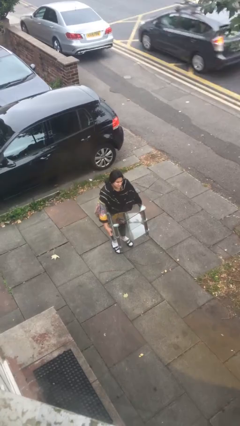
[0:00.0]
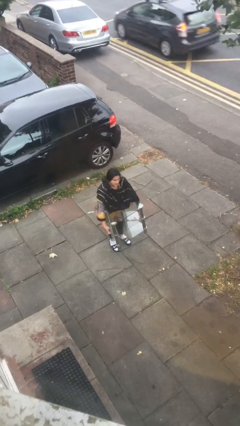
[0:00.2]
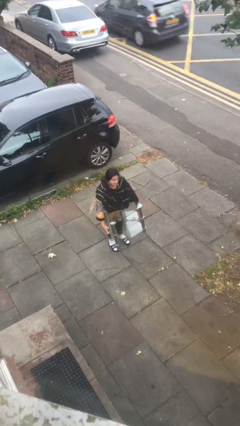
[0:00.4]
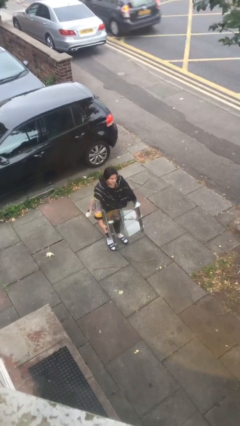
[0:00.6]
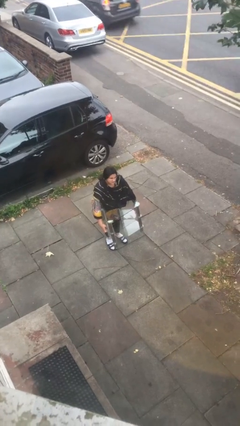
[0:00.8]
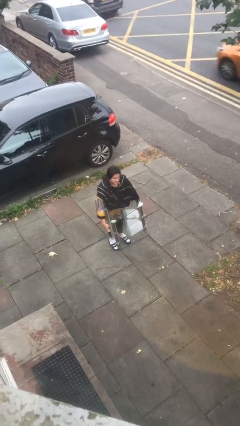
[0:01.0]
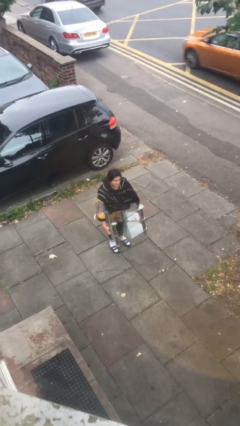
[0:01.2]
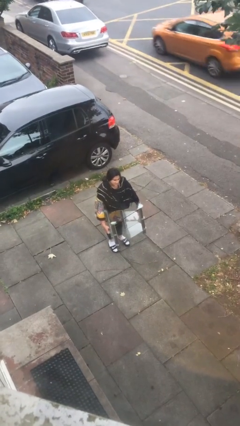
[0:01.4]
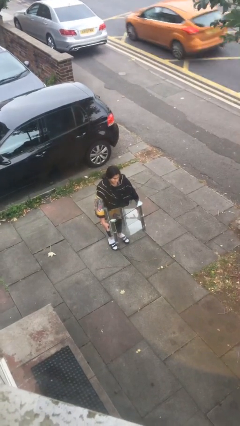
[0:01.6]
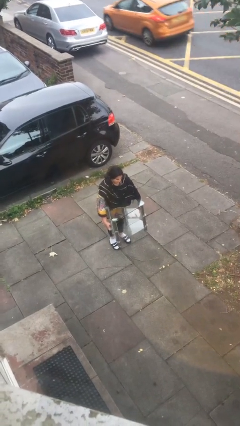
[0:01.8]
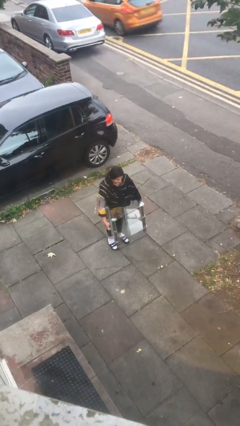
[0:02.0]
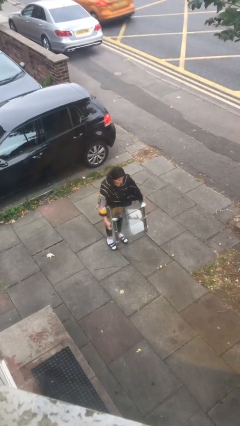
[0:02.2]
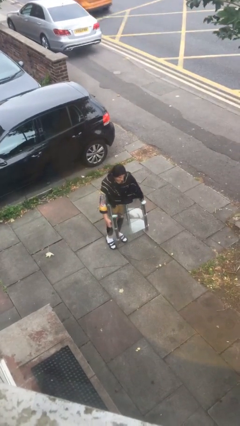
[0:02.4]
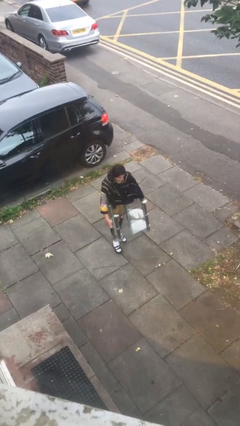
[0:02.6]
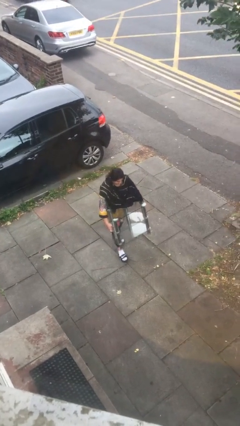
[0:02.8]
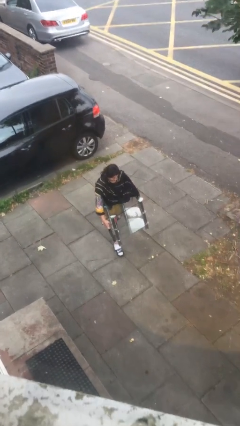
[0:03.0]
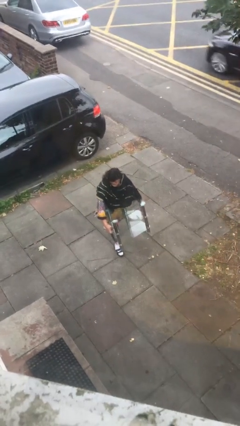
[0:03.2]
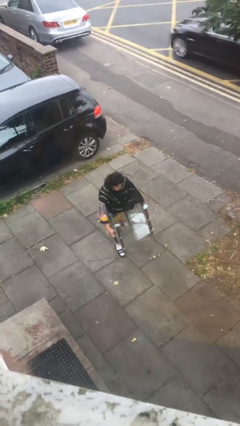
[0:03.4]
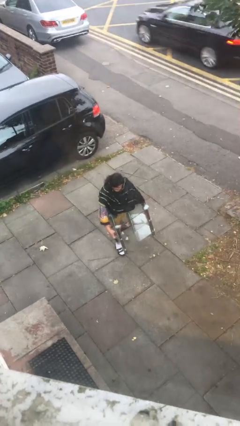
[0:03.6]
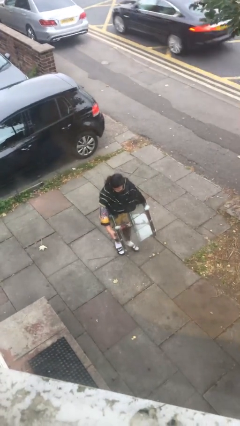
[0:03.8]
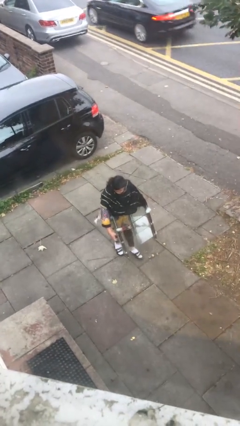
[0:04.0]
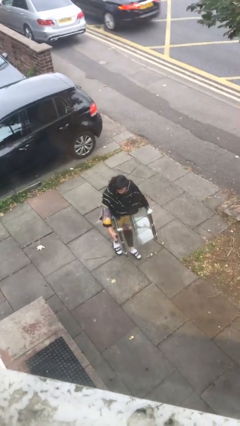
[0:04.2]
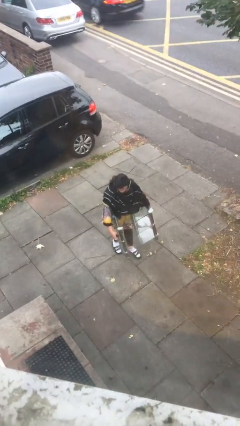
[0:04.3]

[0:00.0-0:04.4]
person carries heavy object

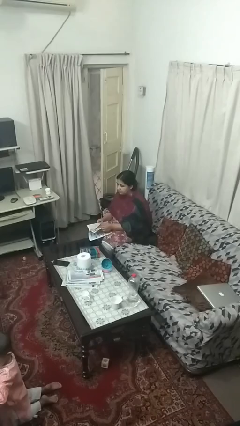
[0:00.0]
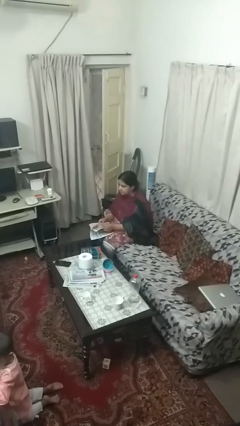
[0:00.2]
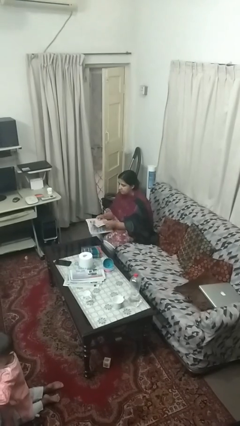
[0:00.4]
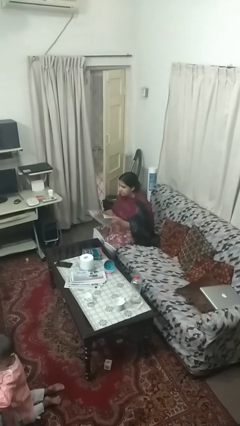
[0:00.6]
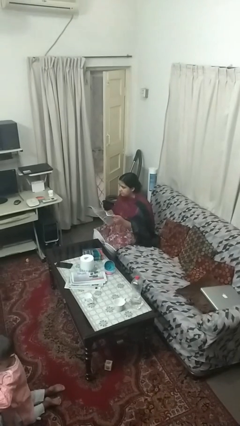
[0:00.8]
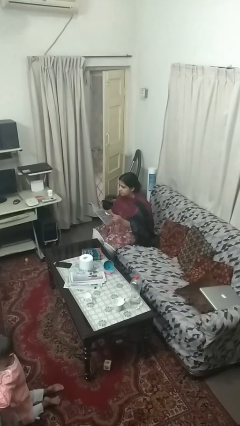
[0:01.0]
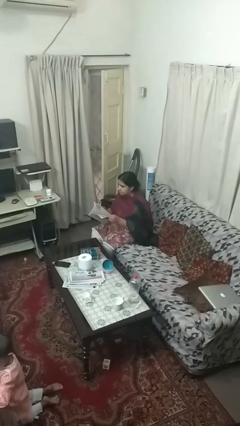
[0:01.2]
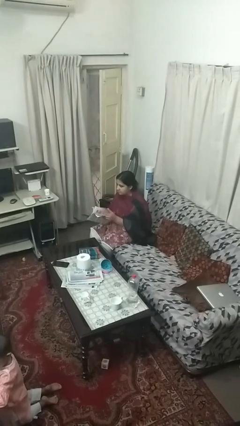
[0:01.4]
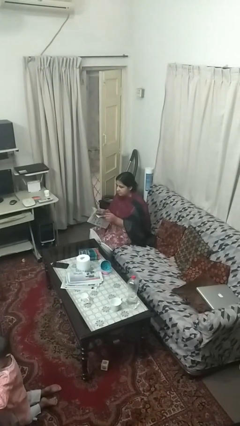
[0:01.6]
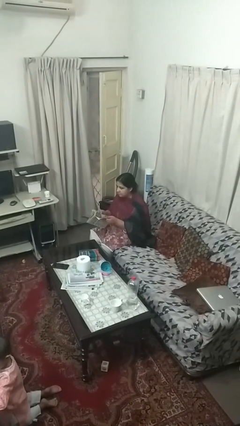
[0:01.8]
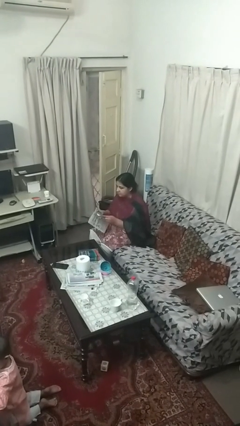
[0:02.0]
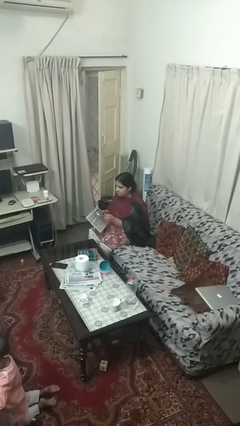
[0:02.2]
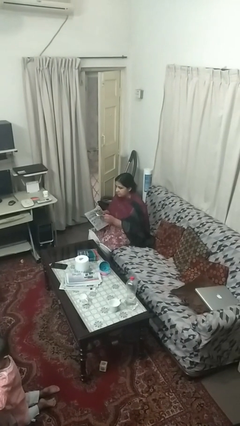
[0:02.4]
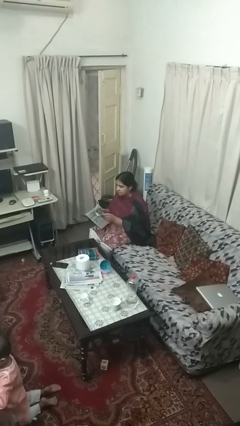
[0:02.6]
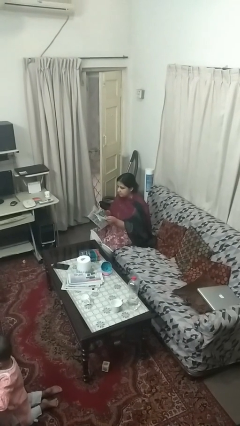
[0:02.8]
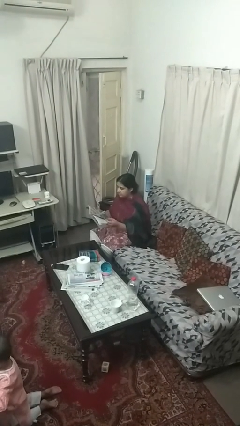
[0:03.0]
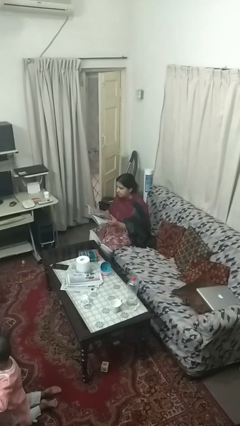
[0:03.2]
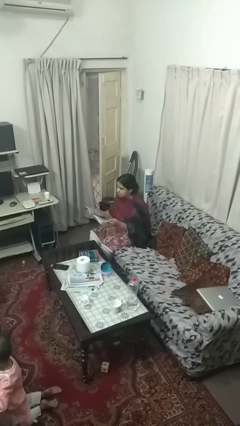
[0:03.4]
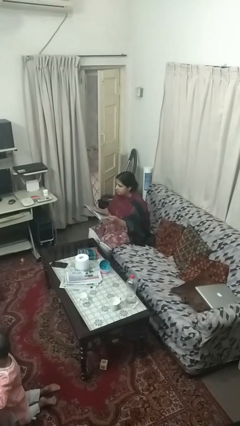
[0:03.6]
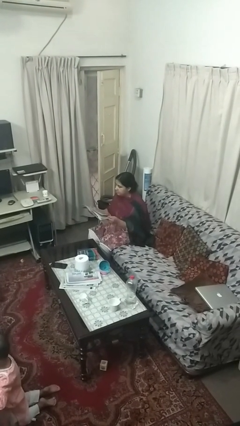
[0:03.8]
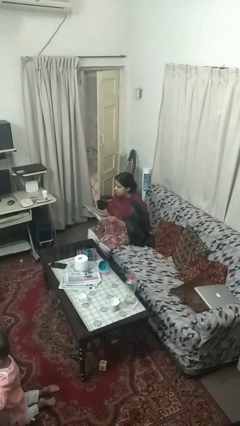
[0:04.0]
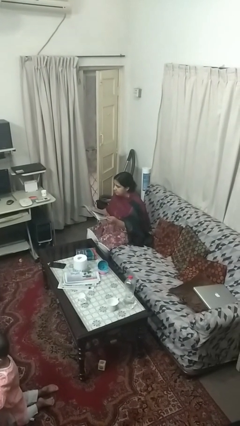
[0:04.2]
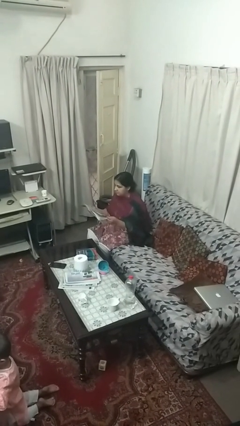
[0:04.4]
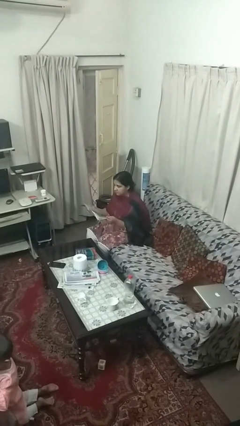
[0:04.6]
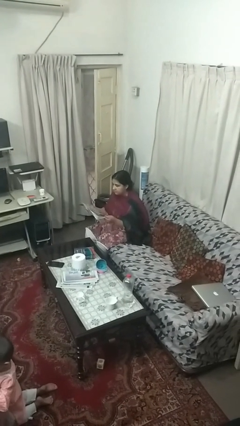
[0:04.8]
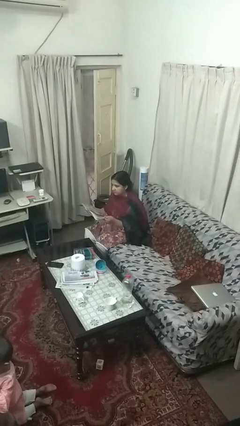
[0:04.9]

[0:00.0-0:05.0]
person reads magazine

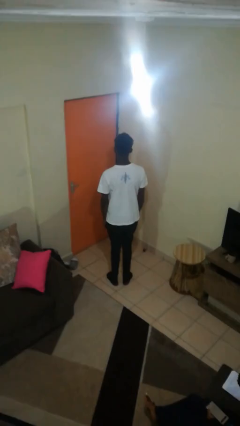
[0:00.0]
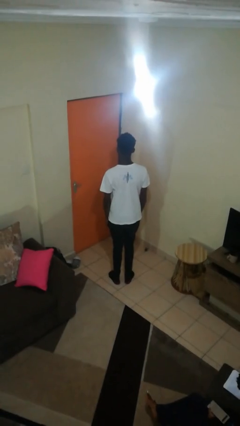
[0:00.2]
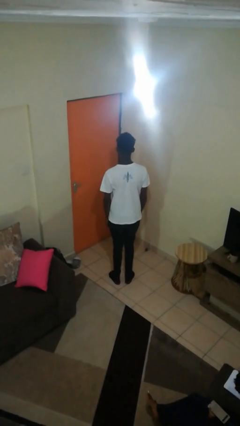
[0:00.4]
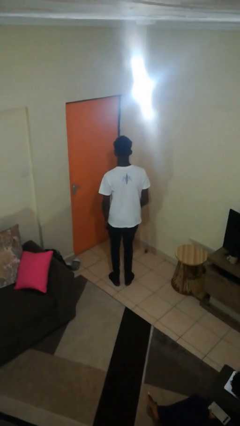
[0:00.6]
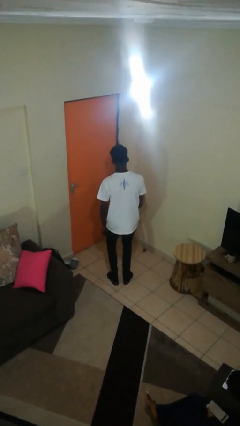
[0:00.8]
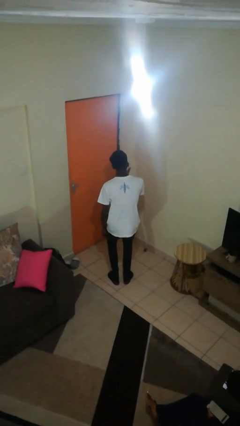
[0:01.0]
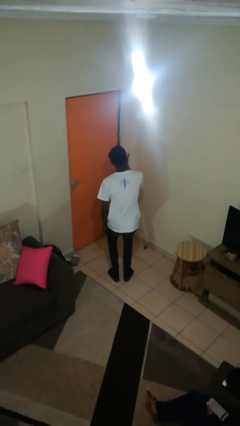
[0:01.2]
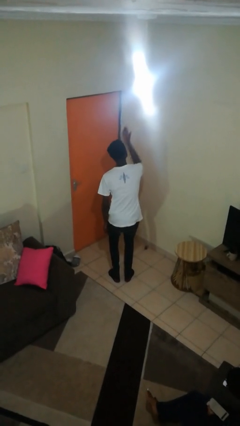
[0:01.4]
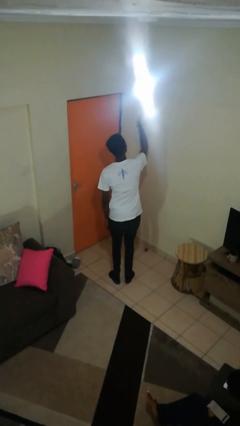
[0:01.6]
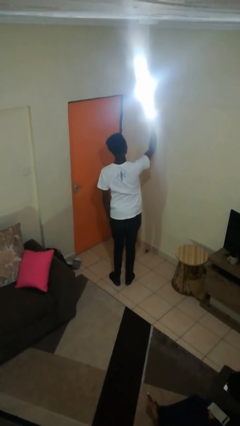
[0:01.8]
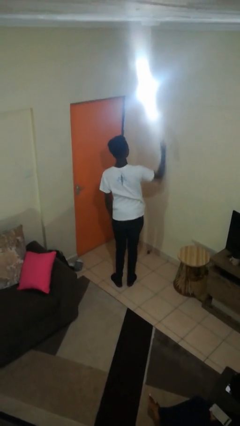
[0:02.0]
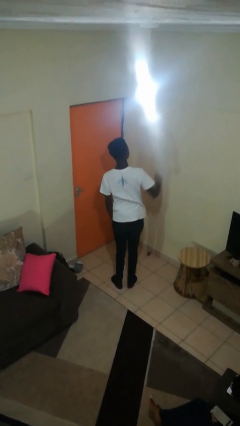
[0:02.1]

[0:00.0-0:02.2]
person gestures blow kiss

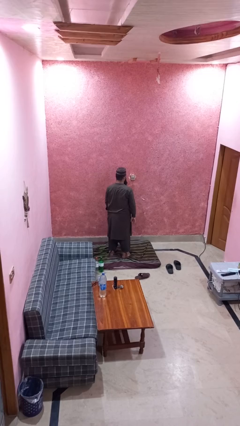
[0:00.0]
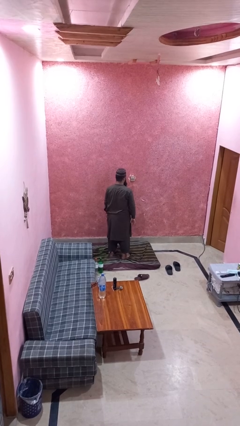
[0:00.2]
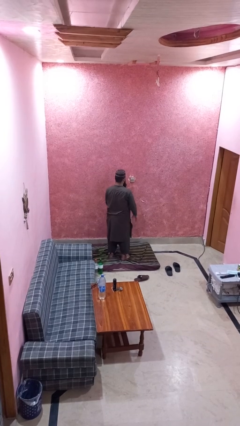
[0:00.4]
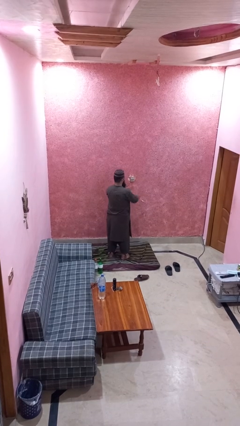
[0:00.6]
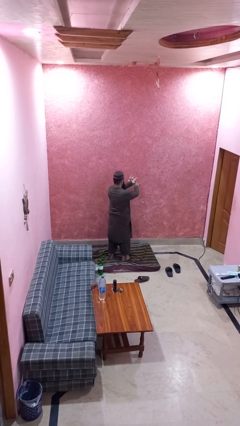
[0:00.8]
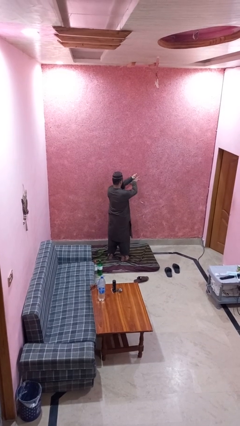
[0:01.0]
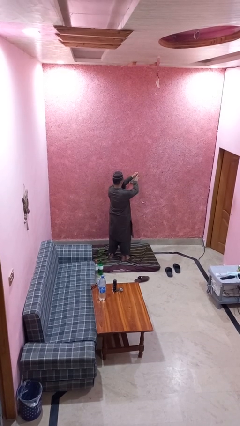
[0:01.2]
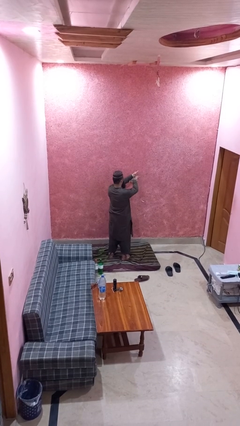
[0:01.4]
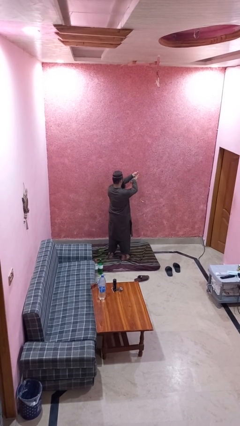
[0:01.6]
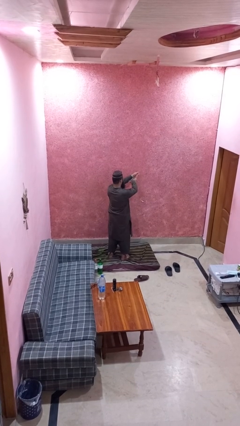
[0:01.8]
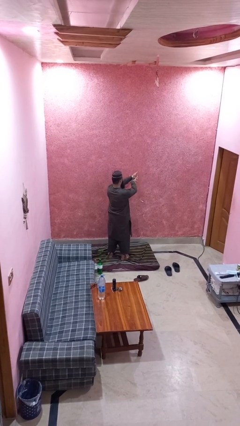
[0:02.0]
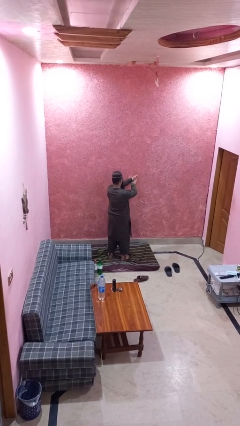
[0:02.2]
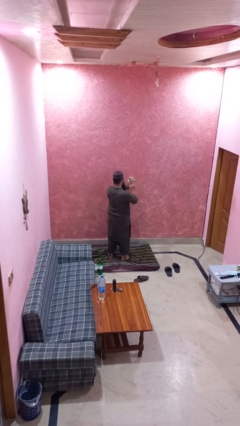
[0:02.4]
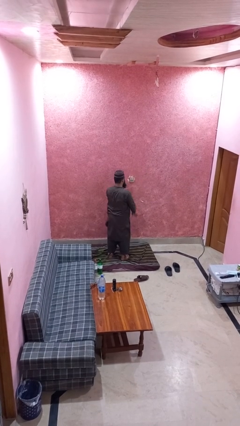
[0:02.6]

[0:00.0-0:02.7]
person snaps fingers

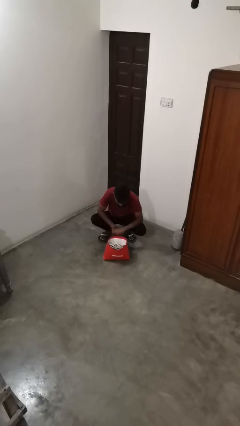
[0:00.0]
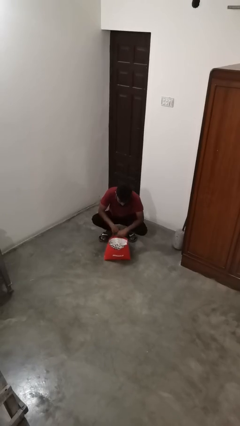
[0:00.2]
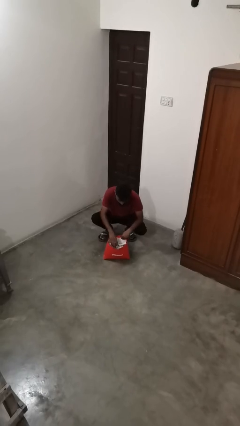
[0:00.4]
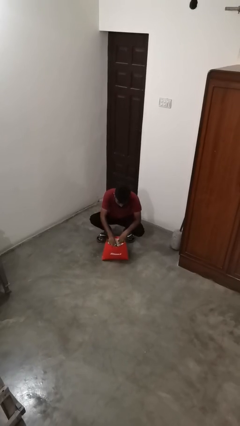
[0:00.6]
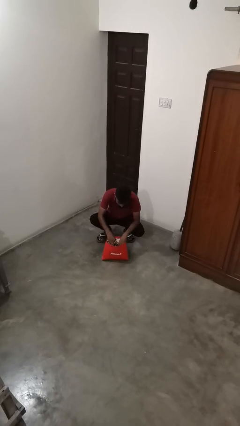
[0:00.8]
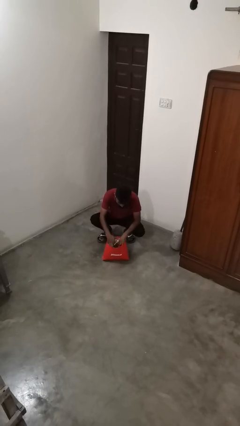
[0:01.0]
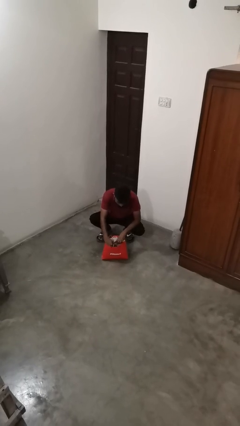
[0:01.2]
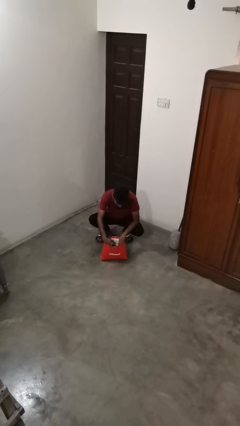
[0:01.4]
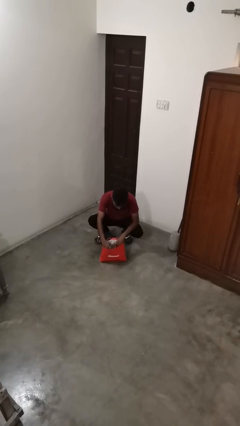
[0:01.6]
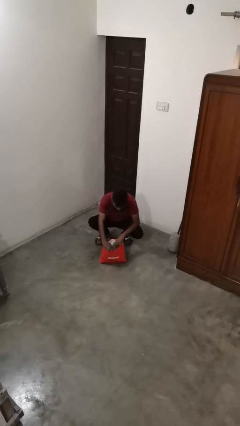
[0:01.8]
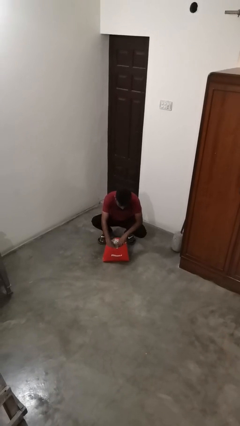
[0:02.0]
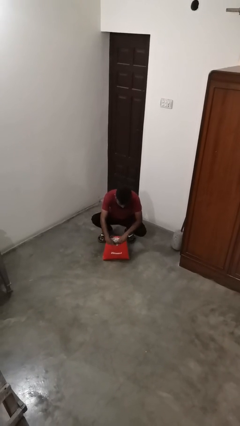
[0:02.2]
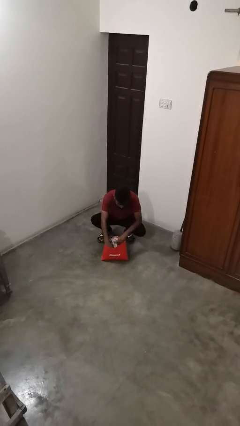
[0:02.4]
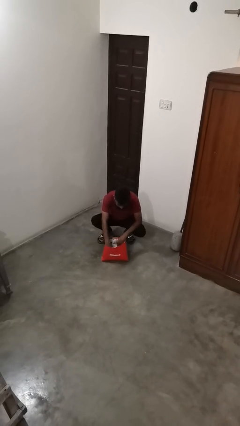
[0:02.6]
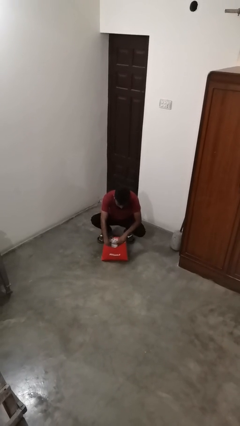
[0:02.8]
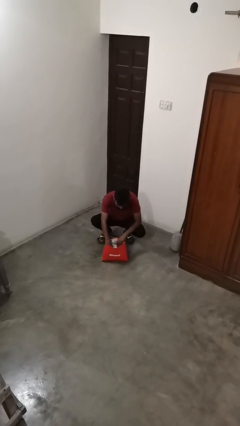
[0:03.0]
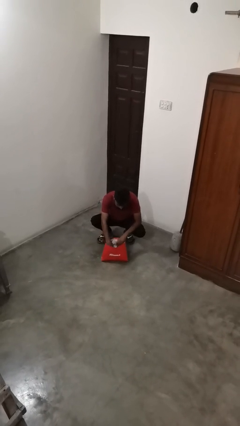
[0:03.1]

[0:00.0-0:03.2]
person searches in bag

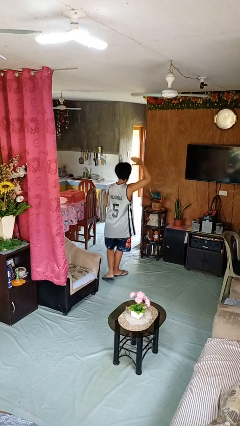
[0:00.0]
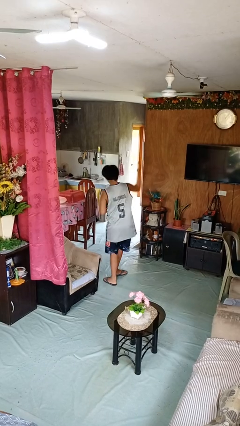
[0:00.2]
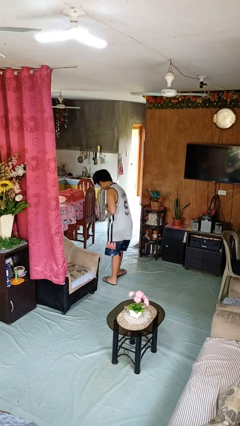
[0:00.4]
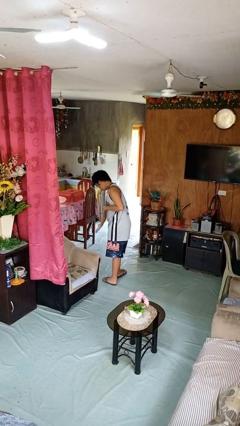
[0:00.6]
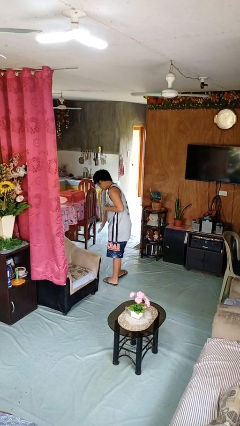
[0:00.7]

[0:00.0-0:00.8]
person karate chop
